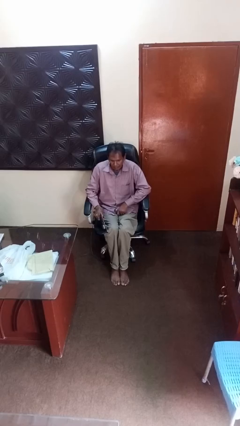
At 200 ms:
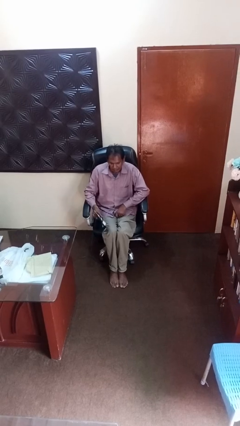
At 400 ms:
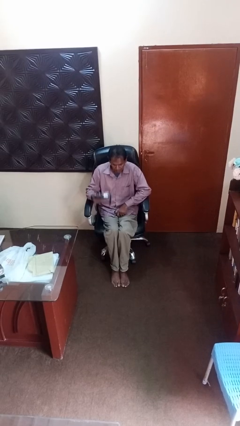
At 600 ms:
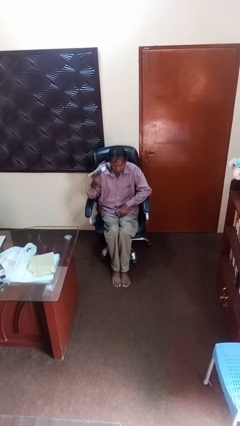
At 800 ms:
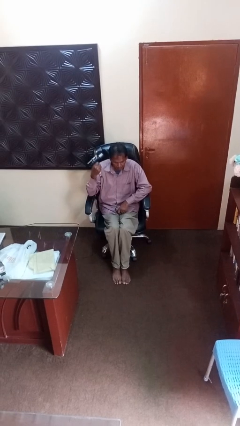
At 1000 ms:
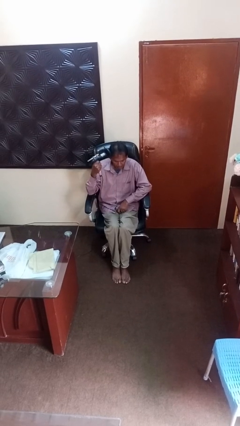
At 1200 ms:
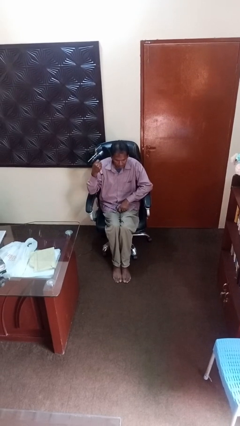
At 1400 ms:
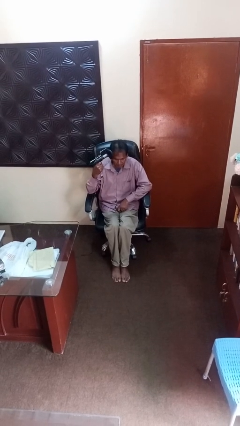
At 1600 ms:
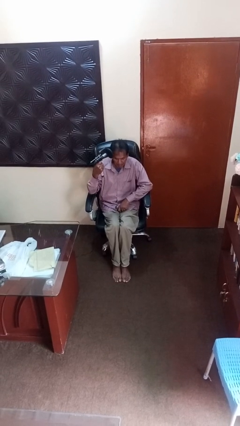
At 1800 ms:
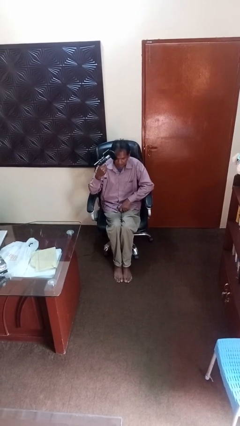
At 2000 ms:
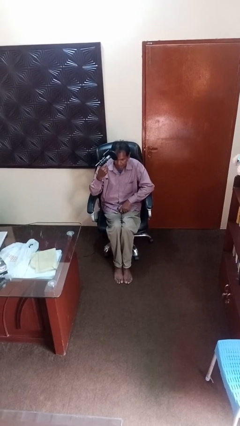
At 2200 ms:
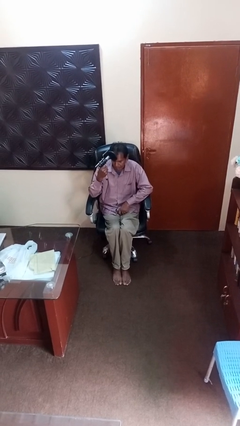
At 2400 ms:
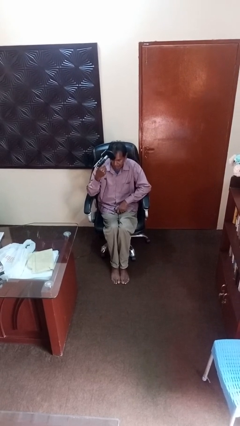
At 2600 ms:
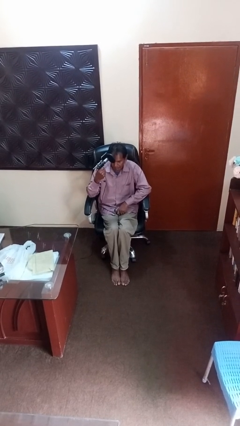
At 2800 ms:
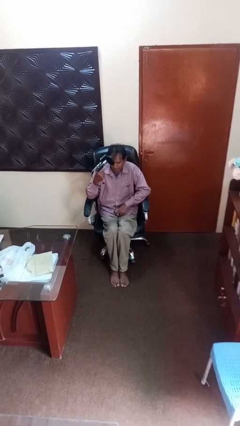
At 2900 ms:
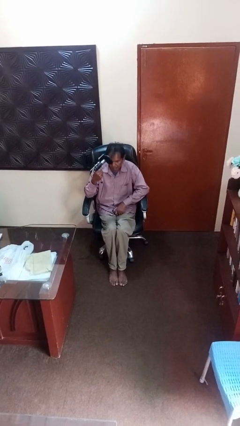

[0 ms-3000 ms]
person dries hair with hairdryer

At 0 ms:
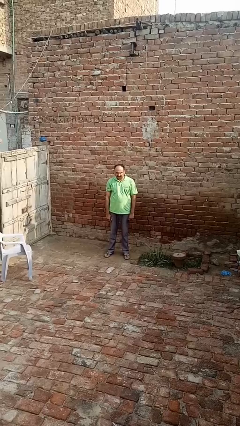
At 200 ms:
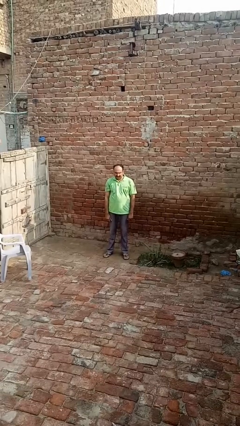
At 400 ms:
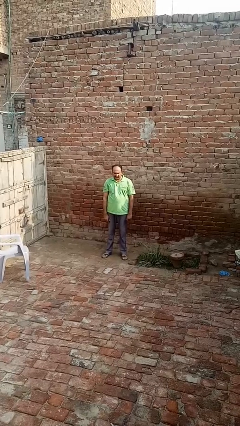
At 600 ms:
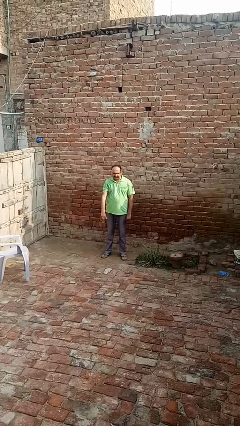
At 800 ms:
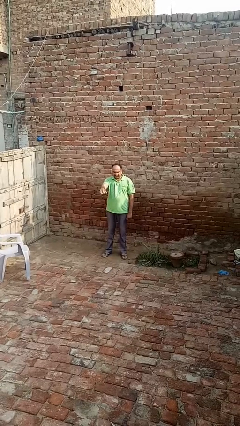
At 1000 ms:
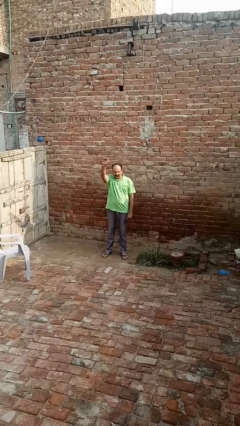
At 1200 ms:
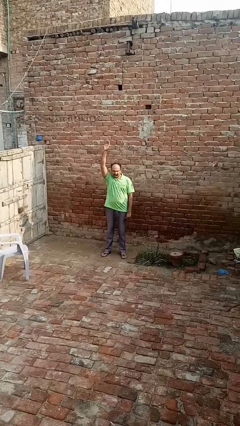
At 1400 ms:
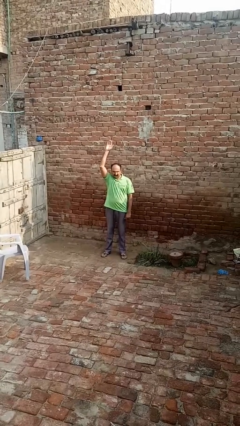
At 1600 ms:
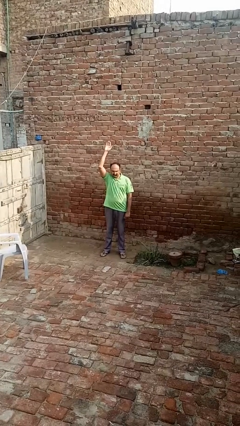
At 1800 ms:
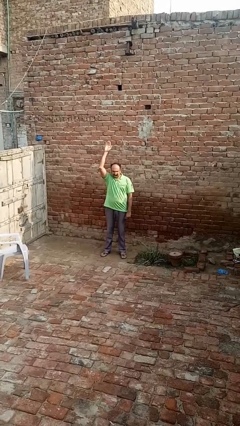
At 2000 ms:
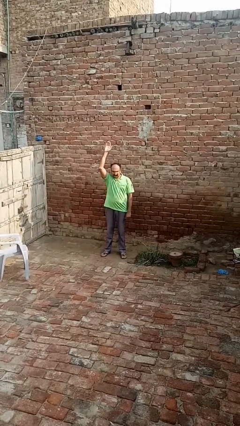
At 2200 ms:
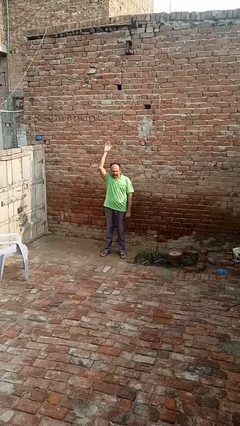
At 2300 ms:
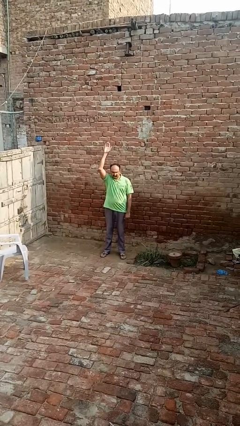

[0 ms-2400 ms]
person gestures swipe up

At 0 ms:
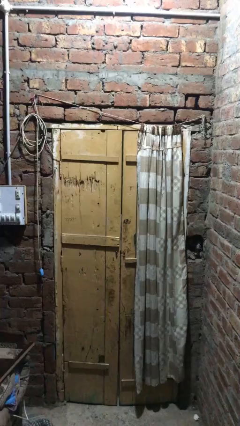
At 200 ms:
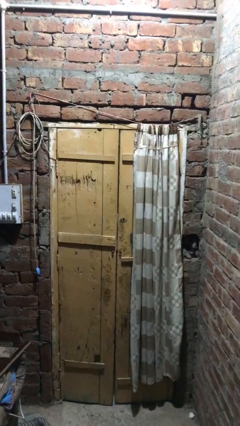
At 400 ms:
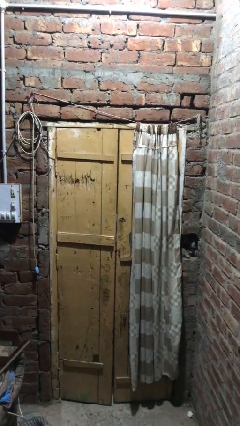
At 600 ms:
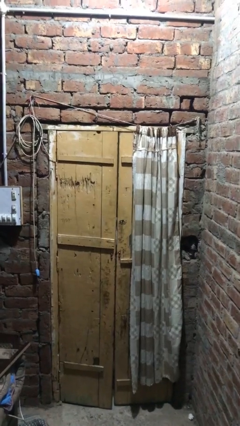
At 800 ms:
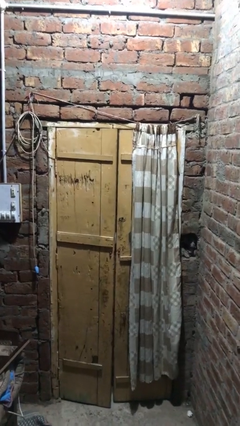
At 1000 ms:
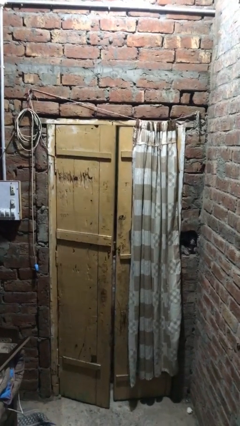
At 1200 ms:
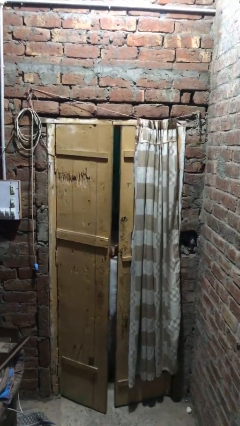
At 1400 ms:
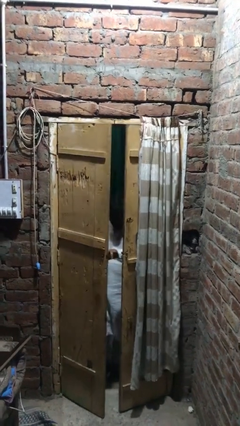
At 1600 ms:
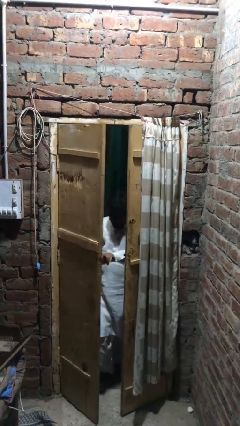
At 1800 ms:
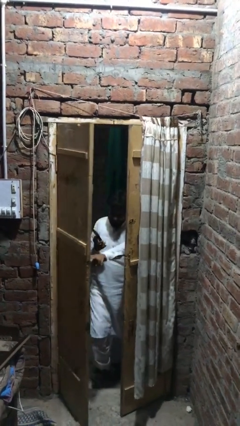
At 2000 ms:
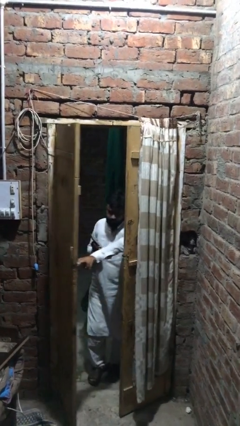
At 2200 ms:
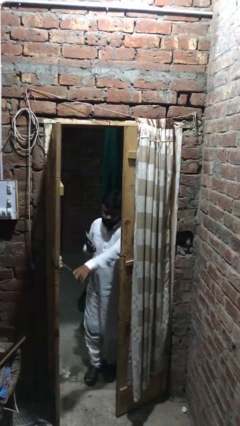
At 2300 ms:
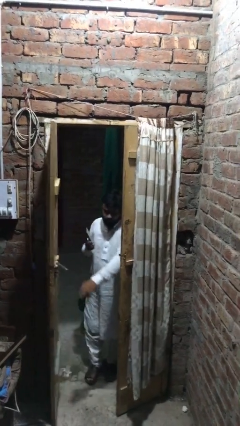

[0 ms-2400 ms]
person opens facility door

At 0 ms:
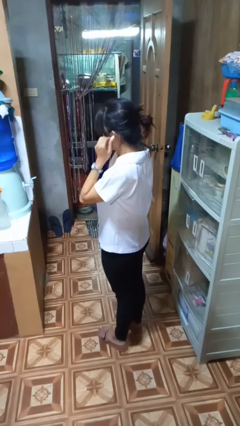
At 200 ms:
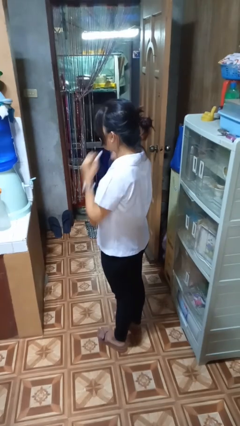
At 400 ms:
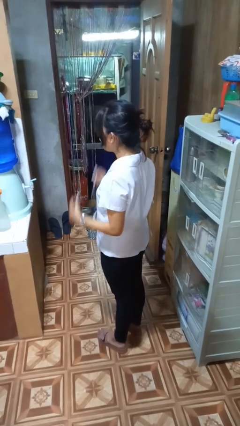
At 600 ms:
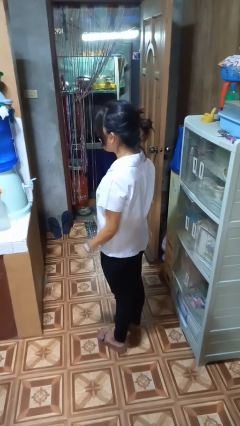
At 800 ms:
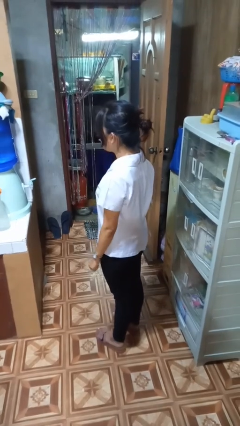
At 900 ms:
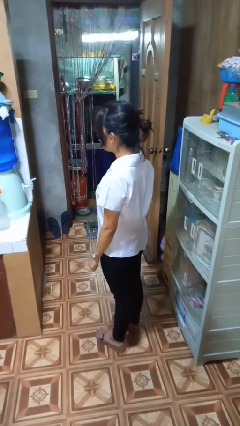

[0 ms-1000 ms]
person takes off headphones

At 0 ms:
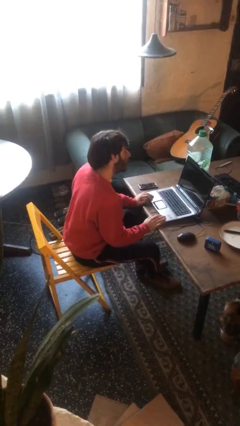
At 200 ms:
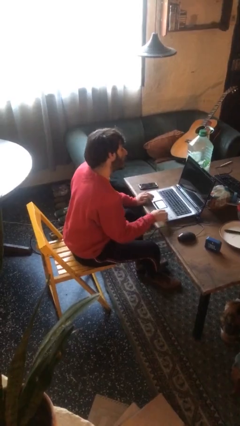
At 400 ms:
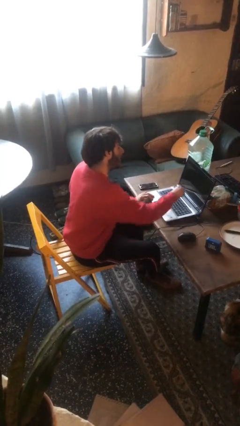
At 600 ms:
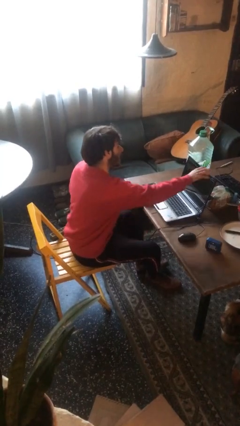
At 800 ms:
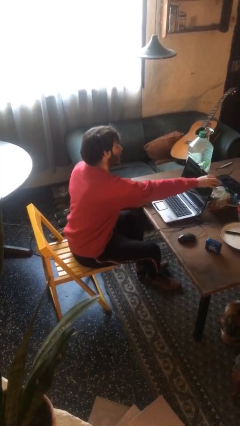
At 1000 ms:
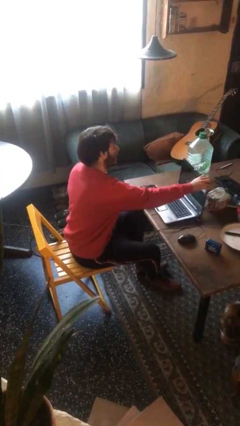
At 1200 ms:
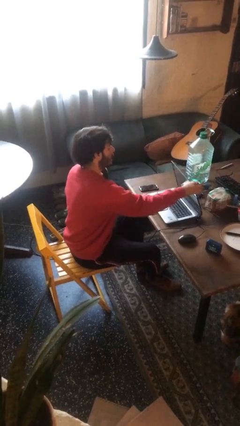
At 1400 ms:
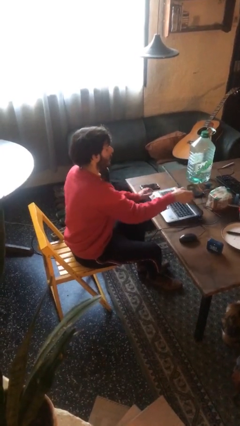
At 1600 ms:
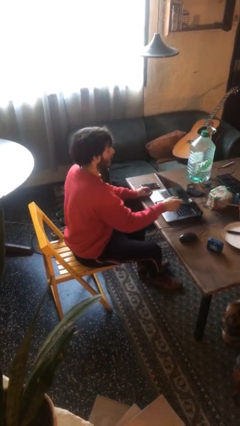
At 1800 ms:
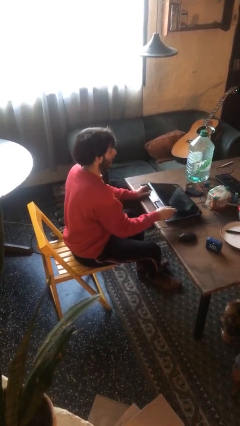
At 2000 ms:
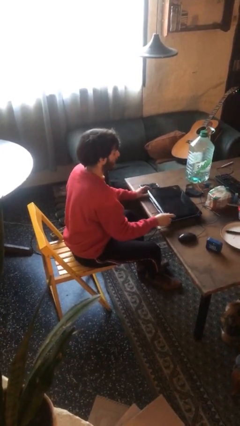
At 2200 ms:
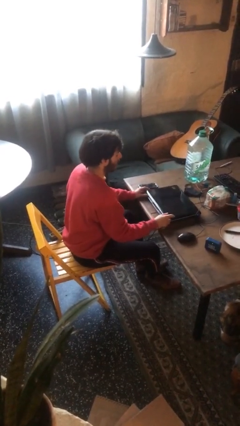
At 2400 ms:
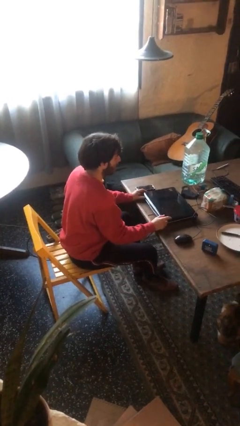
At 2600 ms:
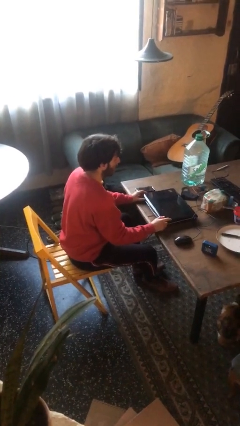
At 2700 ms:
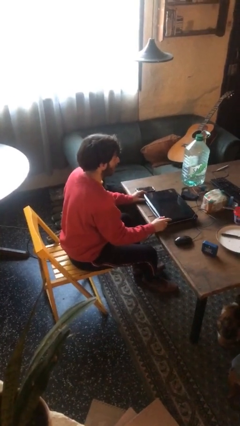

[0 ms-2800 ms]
person closes laptop

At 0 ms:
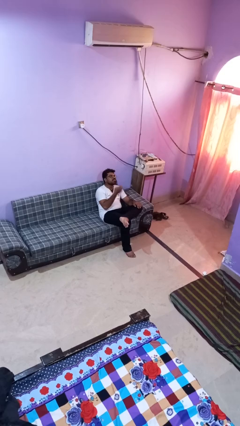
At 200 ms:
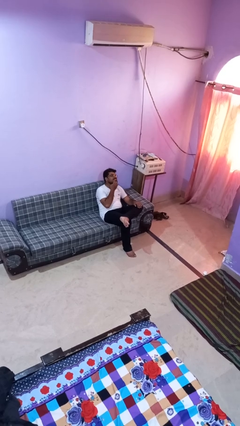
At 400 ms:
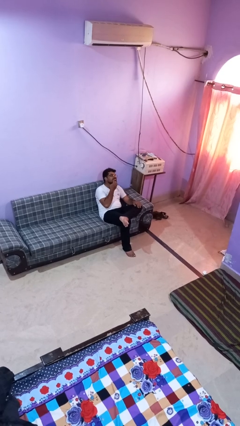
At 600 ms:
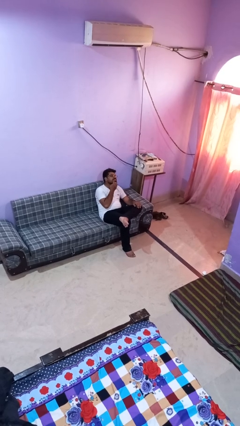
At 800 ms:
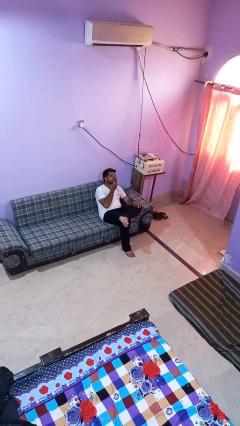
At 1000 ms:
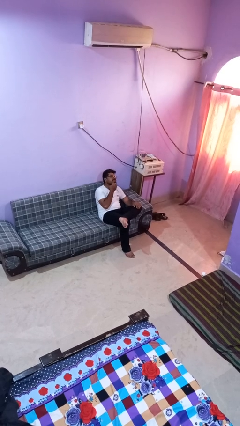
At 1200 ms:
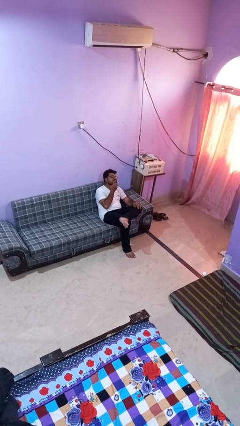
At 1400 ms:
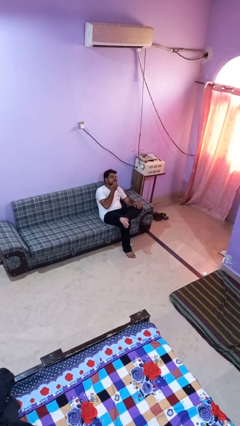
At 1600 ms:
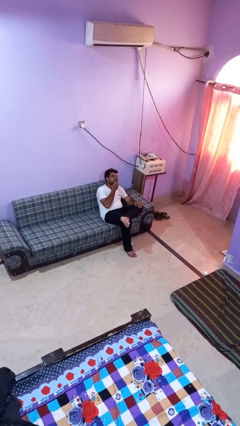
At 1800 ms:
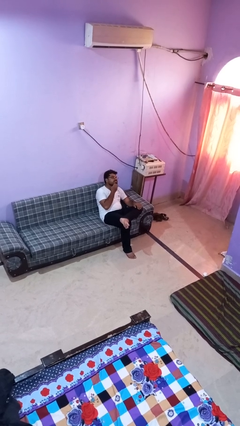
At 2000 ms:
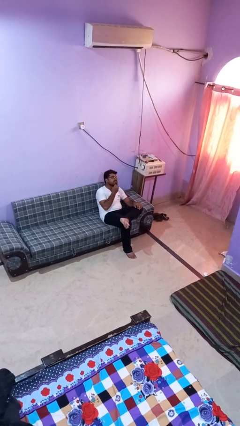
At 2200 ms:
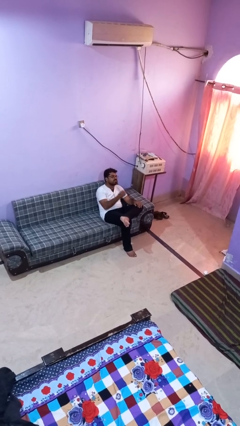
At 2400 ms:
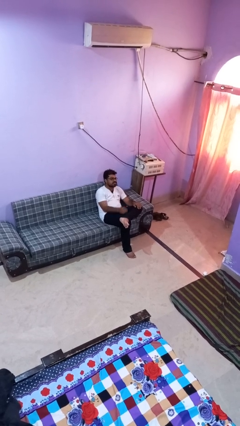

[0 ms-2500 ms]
person strokes chin

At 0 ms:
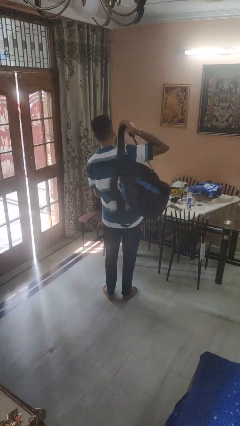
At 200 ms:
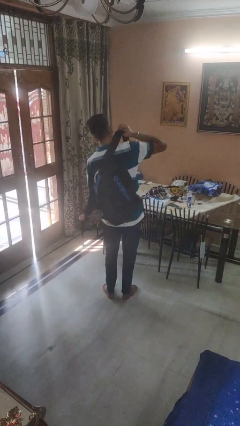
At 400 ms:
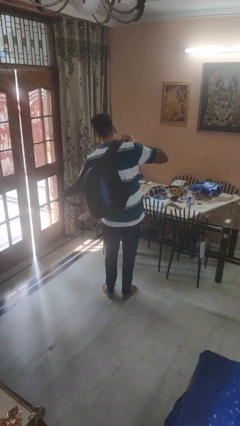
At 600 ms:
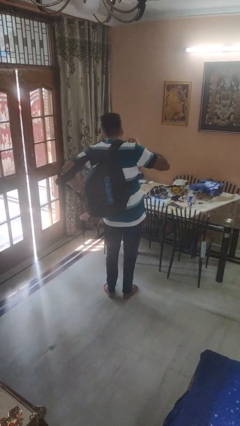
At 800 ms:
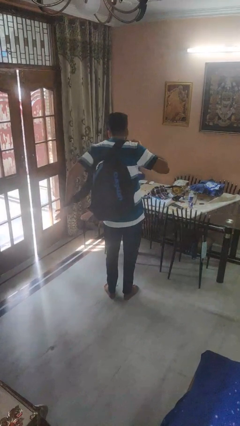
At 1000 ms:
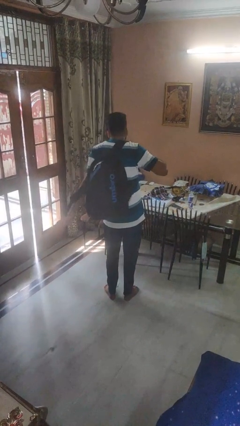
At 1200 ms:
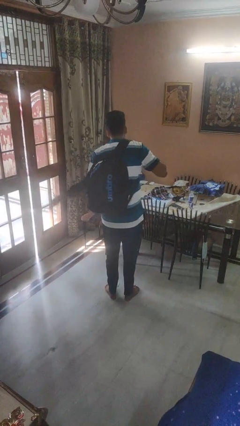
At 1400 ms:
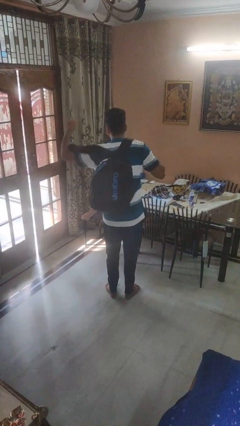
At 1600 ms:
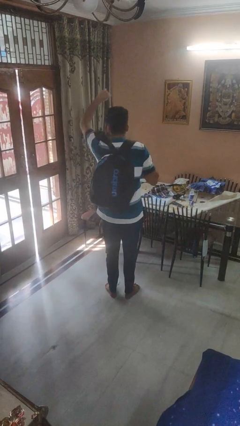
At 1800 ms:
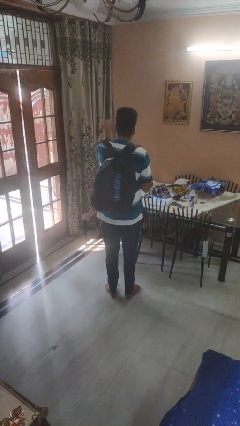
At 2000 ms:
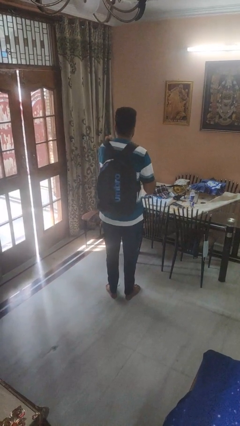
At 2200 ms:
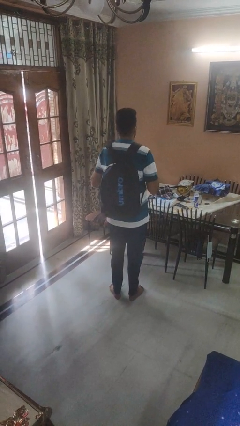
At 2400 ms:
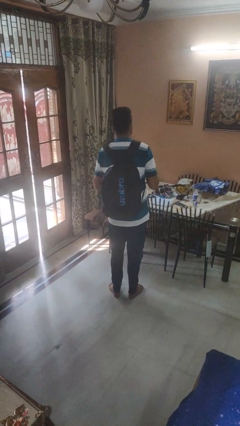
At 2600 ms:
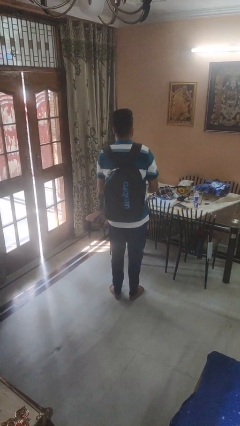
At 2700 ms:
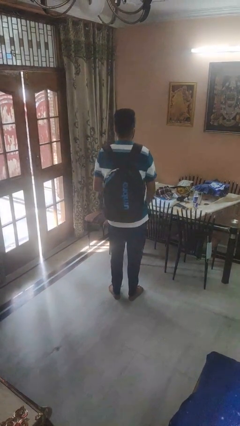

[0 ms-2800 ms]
person puts on backpack
